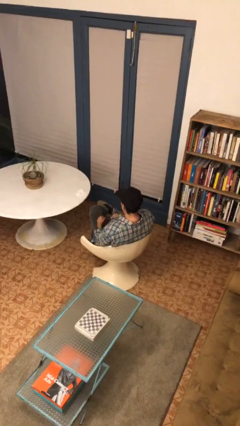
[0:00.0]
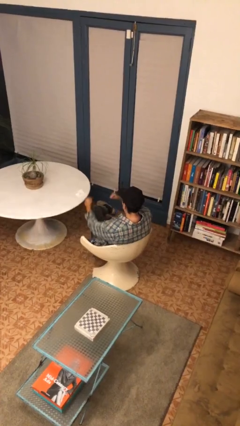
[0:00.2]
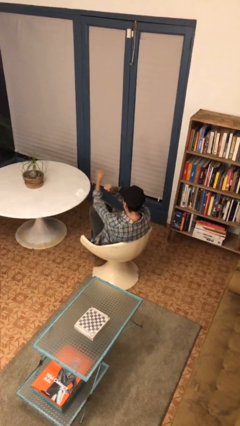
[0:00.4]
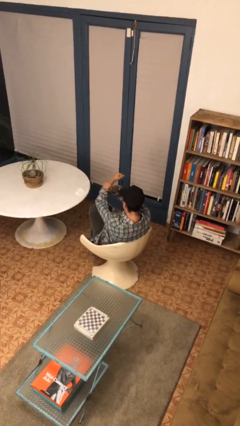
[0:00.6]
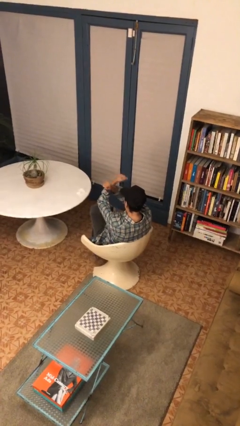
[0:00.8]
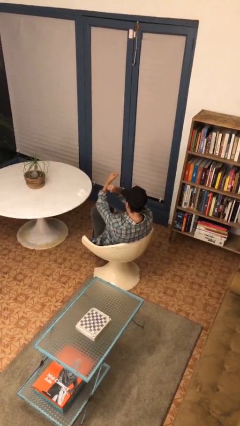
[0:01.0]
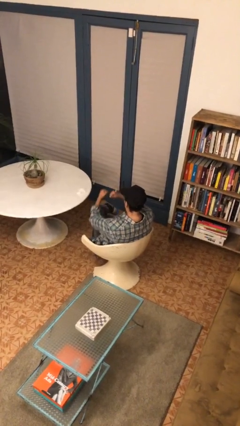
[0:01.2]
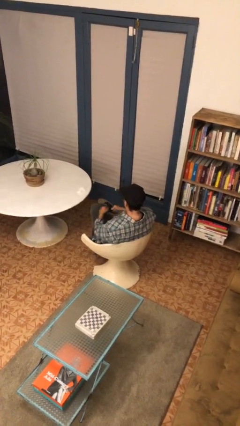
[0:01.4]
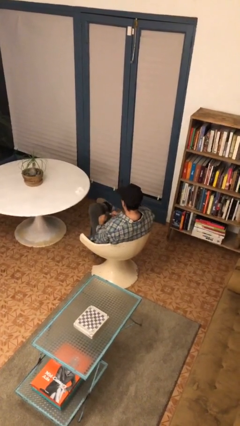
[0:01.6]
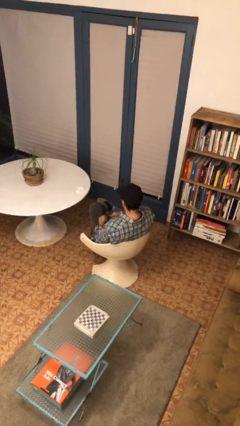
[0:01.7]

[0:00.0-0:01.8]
person gestures arms x

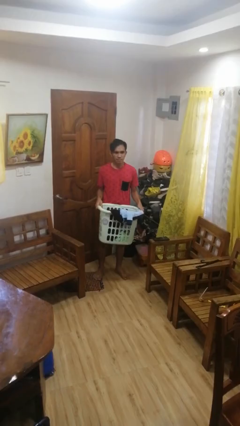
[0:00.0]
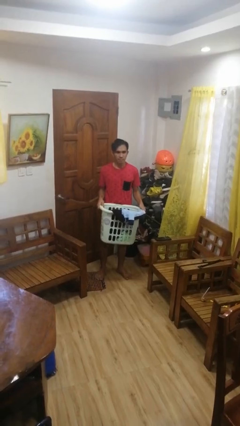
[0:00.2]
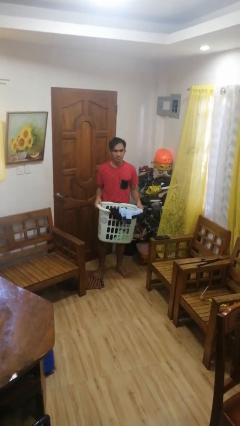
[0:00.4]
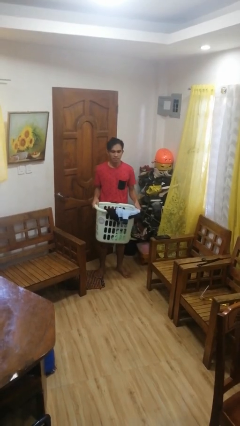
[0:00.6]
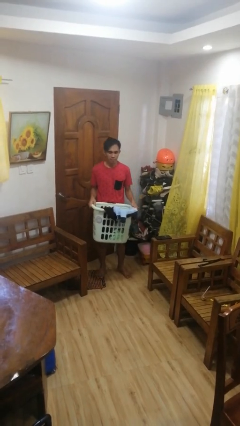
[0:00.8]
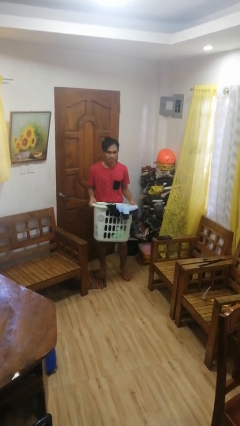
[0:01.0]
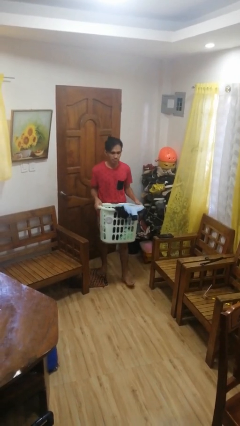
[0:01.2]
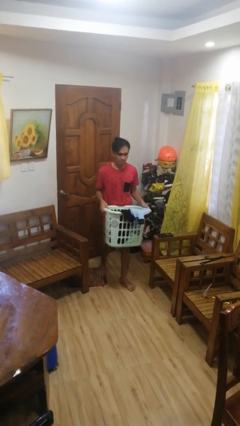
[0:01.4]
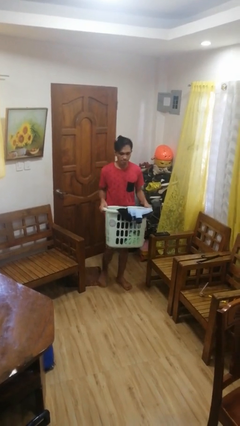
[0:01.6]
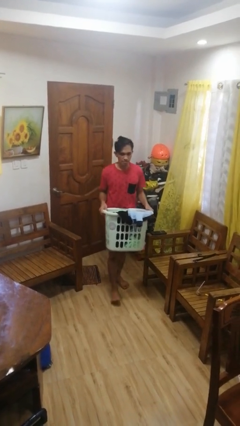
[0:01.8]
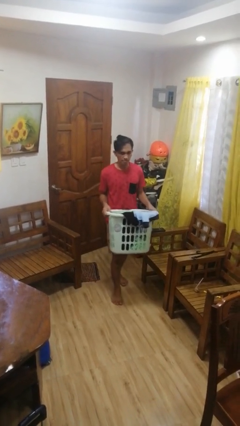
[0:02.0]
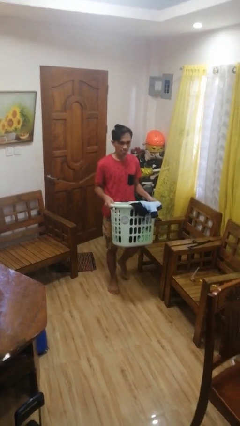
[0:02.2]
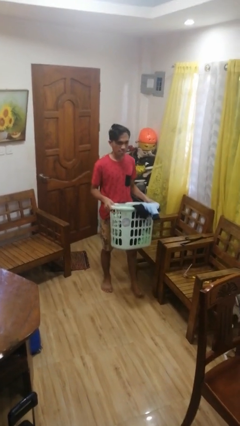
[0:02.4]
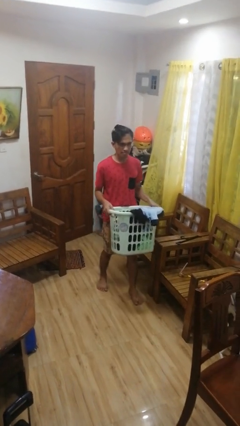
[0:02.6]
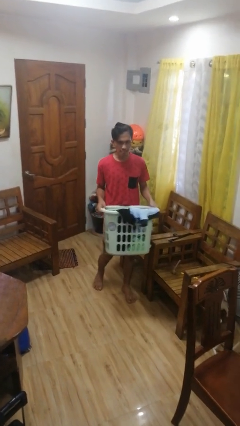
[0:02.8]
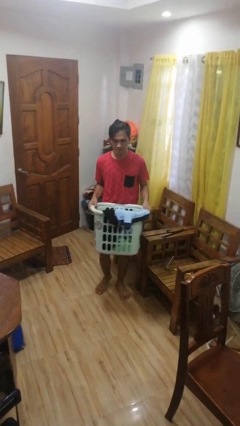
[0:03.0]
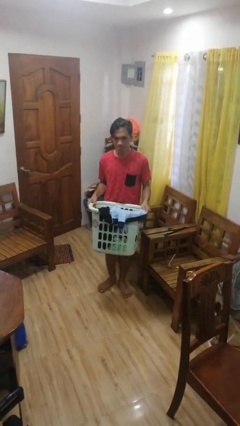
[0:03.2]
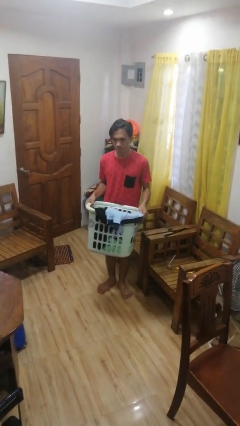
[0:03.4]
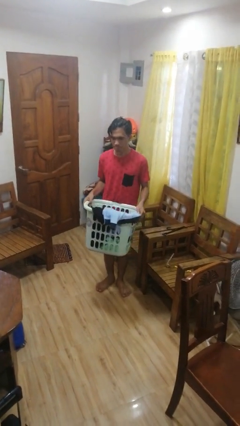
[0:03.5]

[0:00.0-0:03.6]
person carries laundry basket

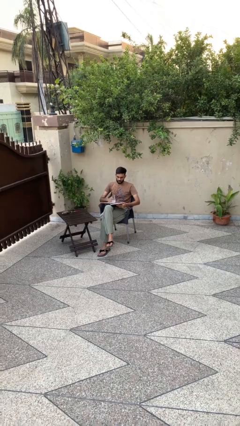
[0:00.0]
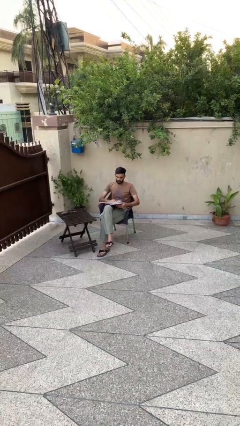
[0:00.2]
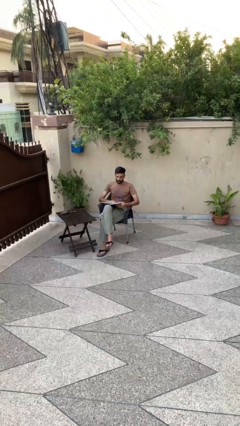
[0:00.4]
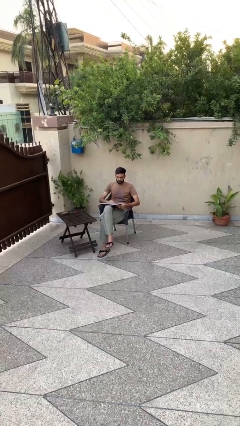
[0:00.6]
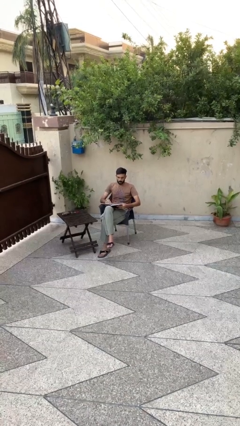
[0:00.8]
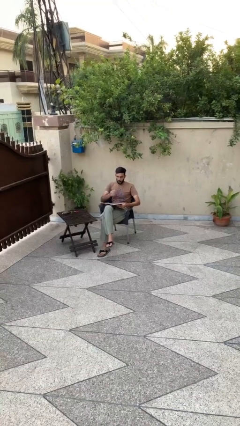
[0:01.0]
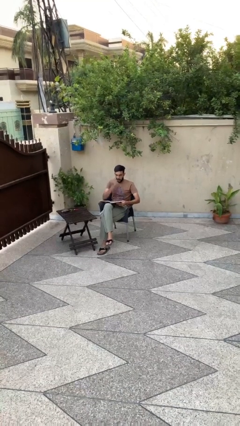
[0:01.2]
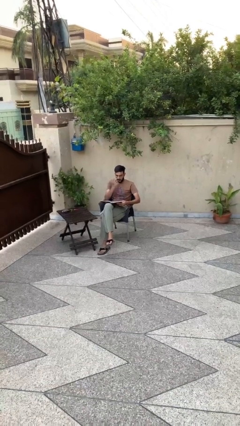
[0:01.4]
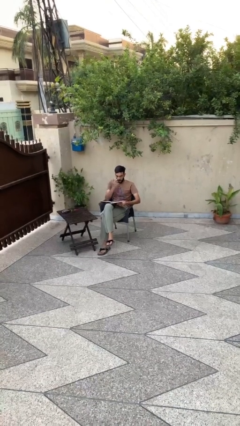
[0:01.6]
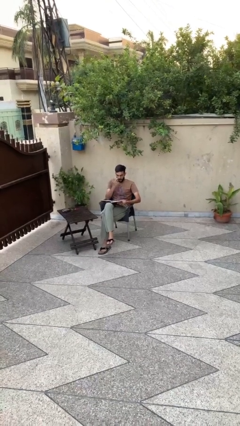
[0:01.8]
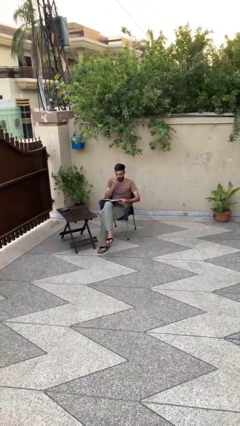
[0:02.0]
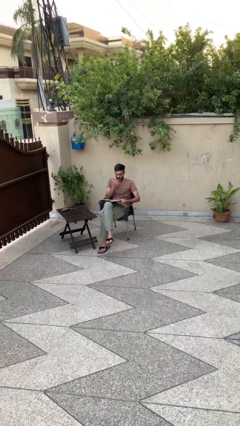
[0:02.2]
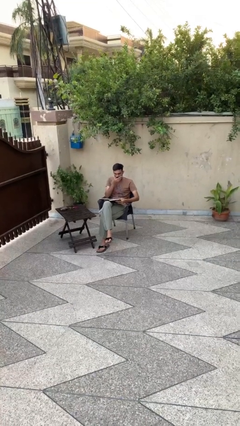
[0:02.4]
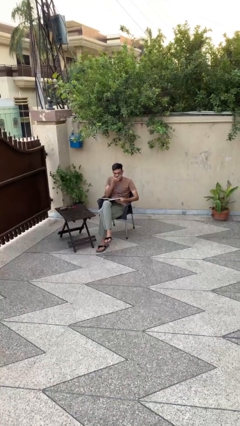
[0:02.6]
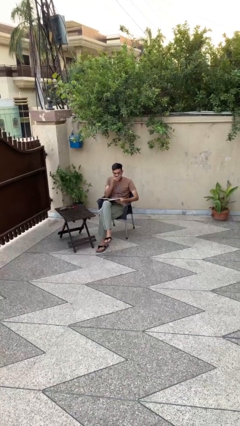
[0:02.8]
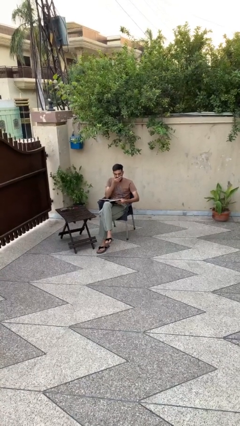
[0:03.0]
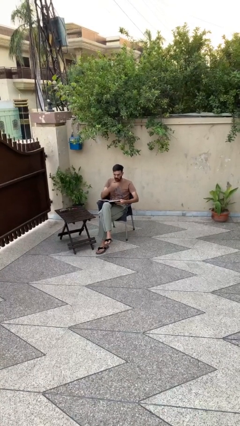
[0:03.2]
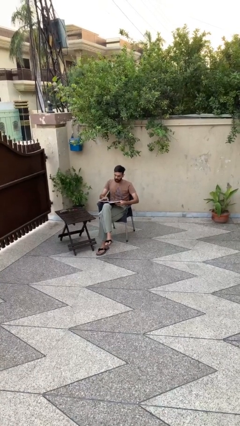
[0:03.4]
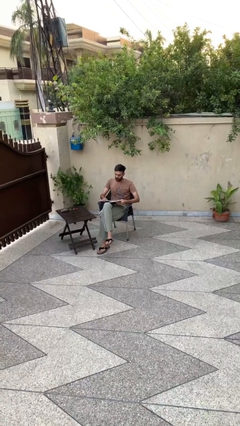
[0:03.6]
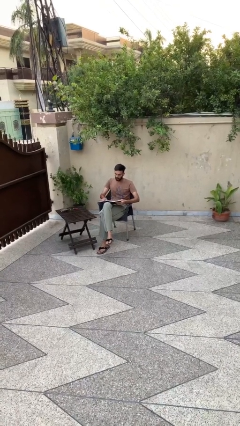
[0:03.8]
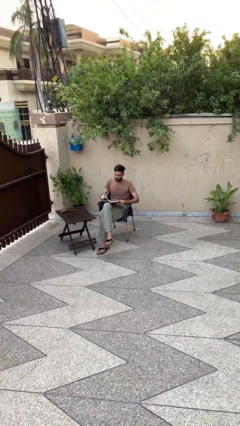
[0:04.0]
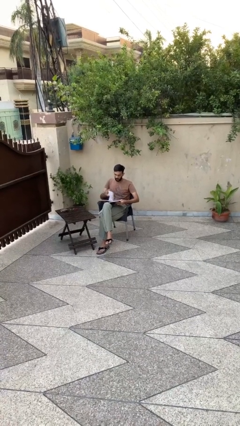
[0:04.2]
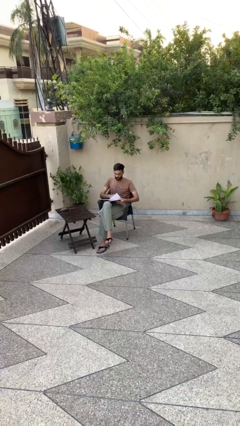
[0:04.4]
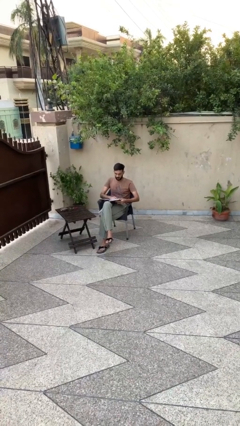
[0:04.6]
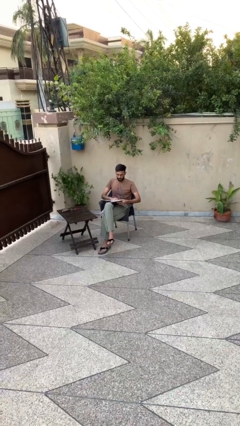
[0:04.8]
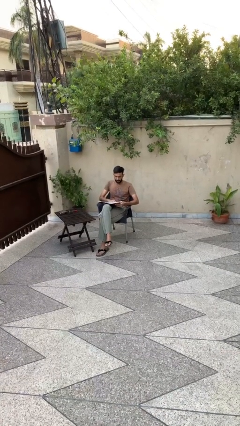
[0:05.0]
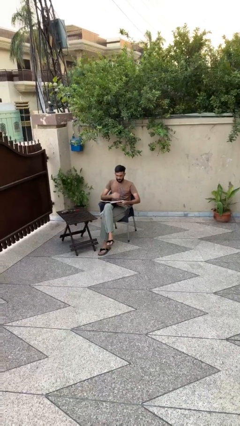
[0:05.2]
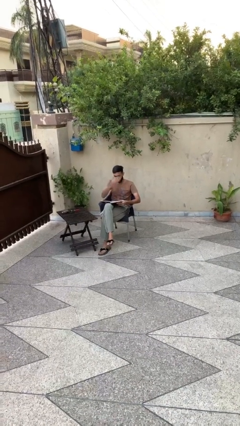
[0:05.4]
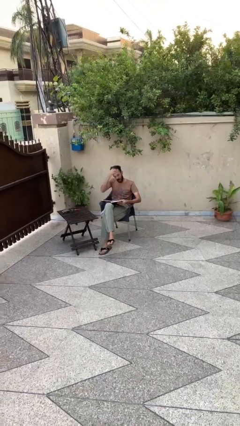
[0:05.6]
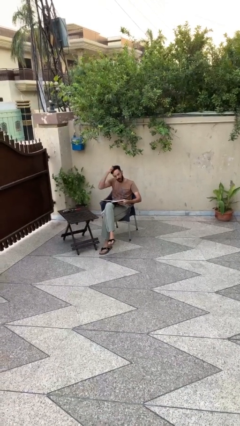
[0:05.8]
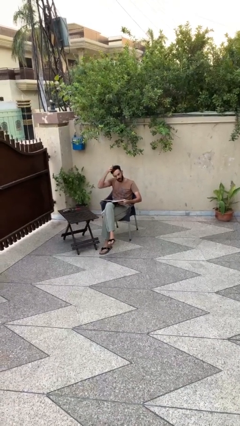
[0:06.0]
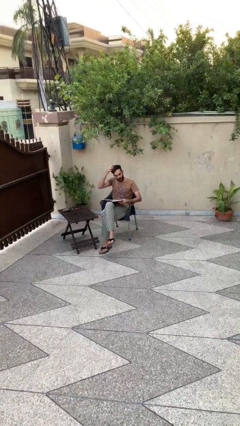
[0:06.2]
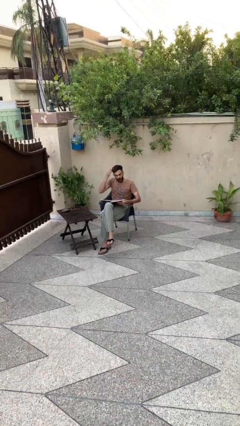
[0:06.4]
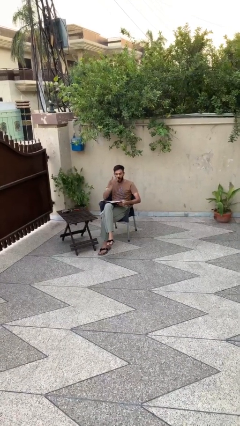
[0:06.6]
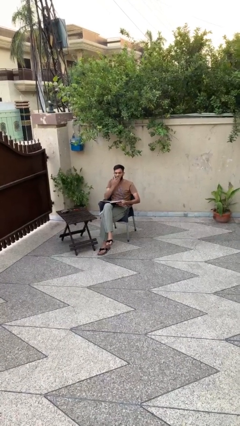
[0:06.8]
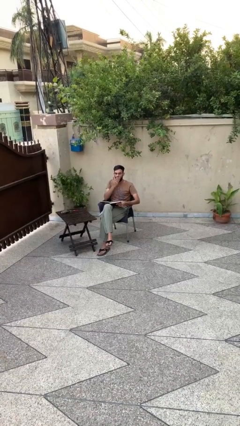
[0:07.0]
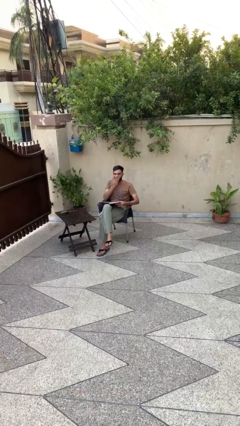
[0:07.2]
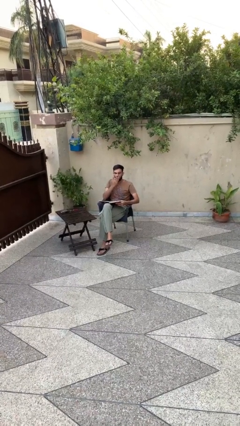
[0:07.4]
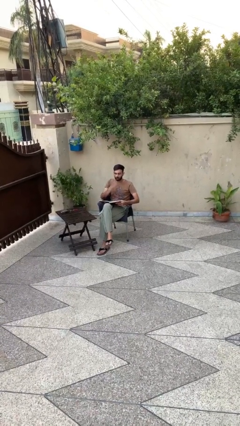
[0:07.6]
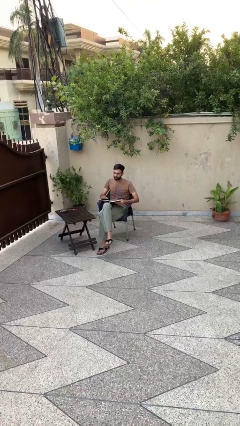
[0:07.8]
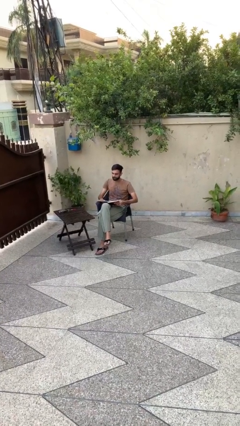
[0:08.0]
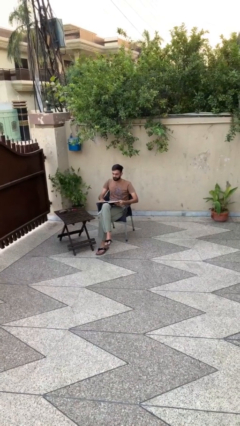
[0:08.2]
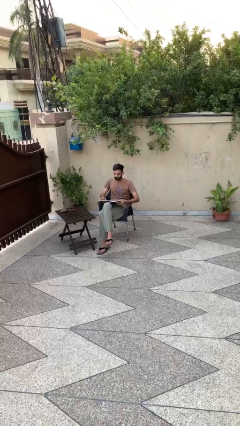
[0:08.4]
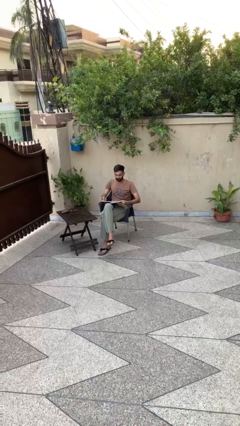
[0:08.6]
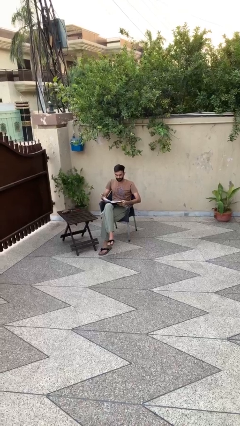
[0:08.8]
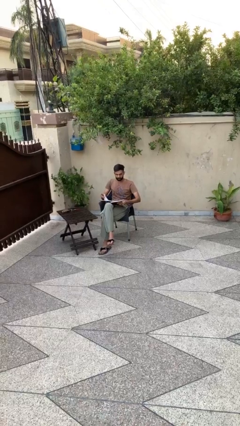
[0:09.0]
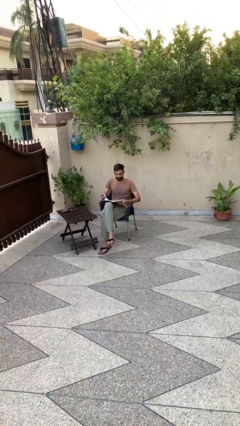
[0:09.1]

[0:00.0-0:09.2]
person reads document

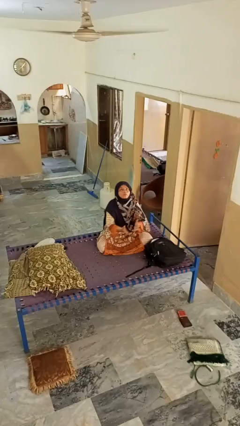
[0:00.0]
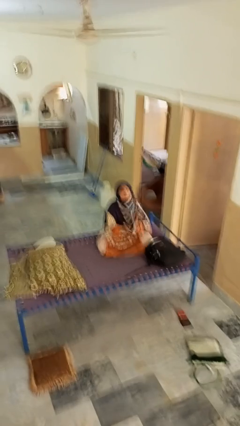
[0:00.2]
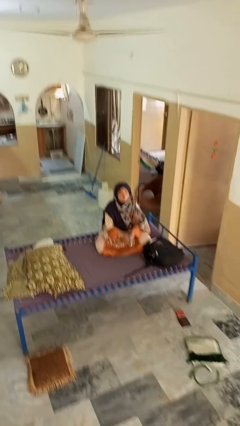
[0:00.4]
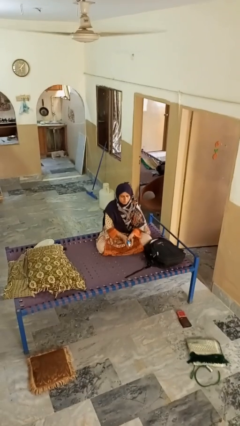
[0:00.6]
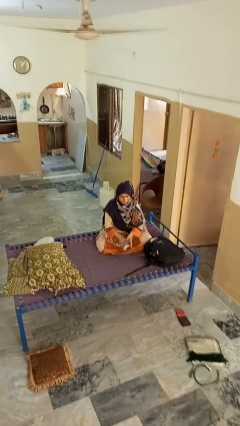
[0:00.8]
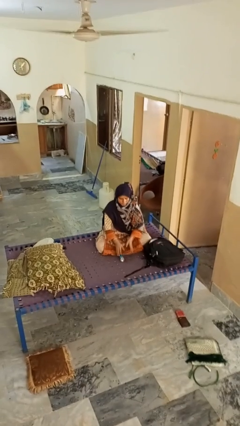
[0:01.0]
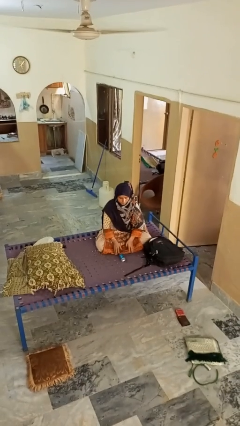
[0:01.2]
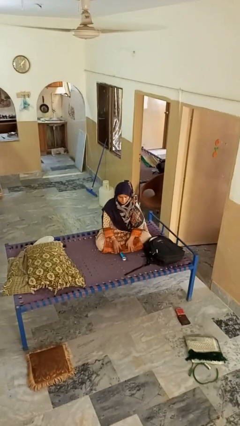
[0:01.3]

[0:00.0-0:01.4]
person catches dropped object

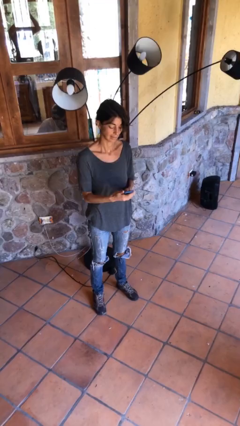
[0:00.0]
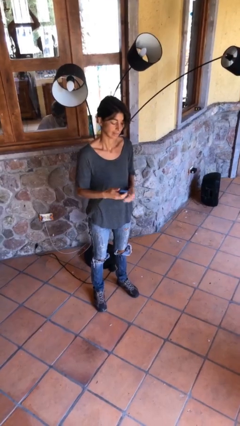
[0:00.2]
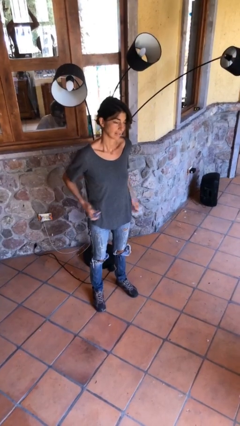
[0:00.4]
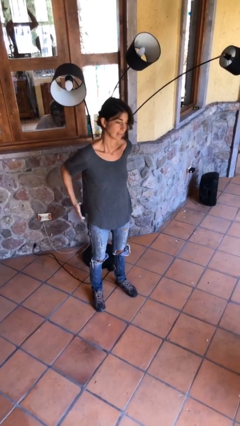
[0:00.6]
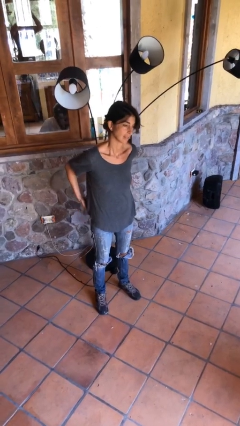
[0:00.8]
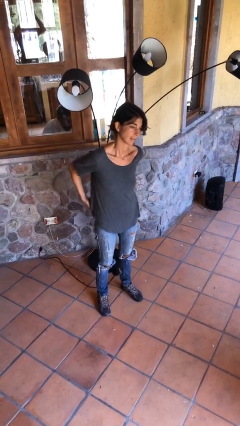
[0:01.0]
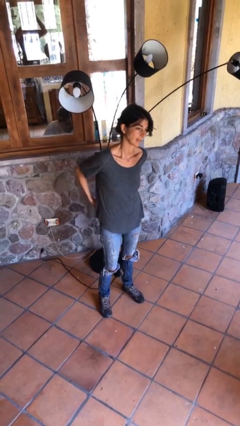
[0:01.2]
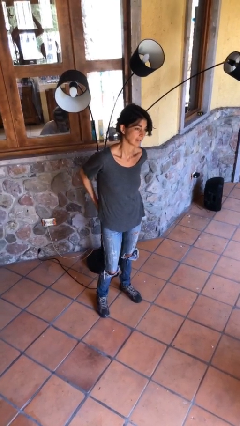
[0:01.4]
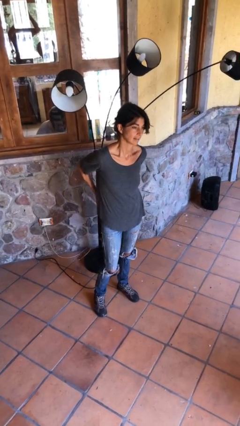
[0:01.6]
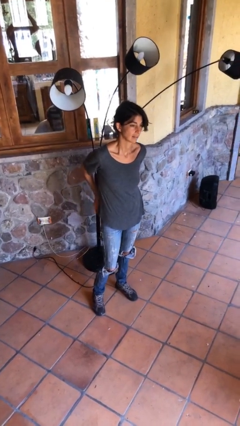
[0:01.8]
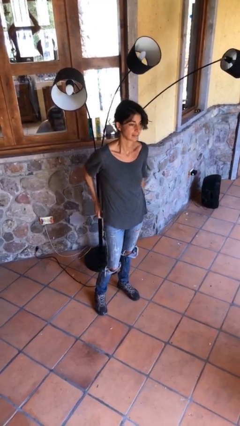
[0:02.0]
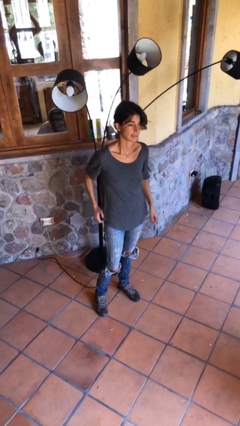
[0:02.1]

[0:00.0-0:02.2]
person puts phone into pocket
